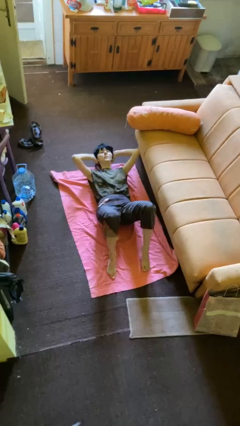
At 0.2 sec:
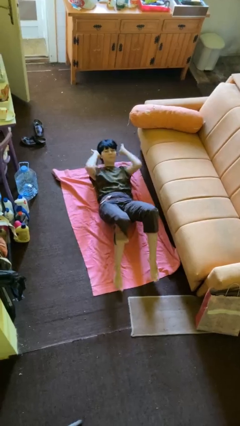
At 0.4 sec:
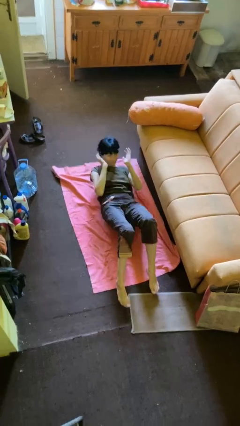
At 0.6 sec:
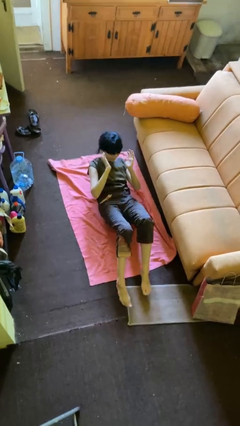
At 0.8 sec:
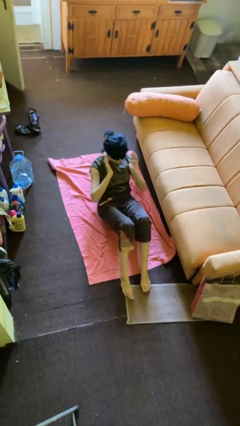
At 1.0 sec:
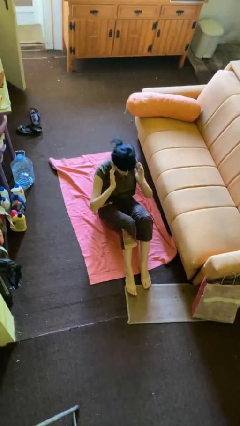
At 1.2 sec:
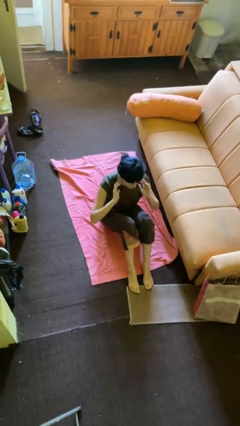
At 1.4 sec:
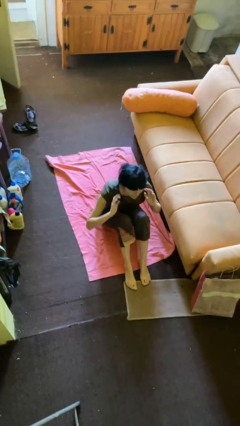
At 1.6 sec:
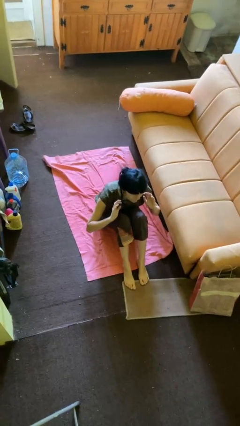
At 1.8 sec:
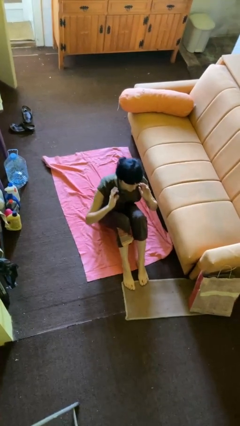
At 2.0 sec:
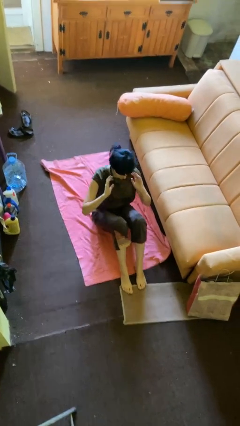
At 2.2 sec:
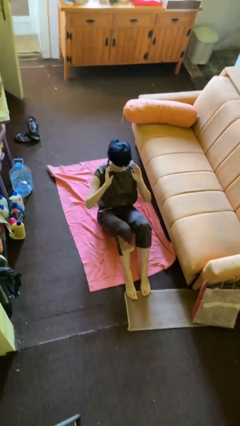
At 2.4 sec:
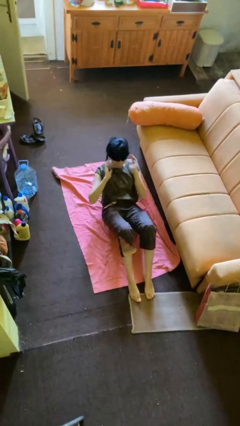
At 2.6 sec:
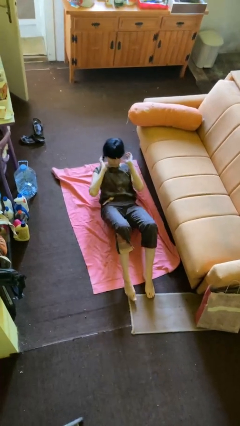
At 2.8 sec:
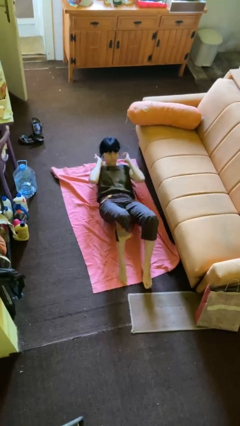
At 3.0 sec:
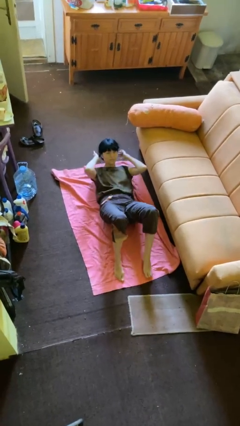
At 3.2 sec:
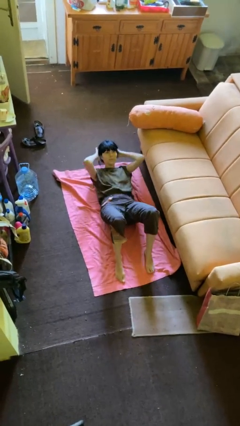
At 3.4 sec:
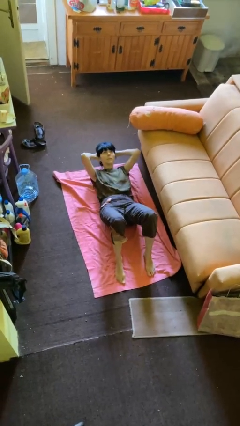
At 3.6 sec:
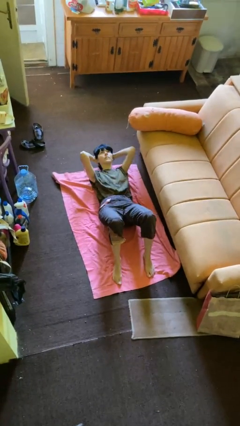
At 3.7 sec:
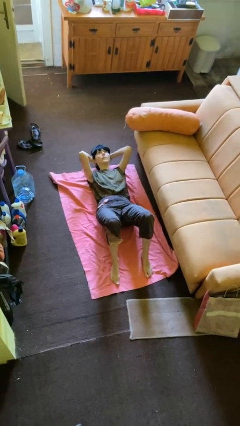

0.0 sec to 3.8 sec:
person exercises with situp

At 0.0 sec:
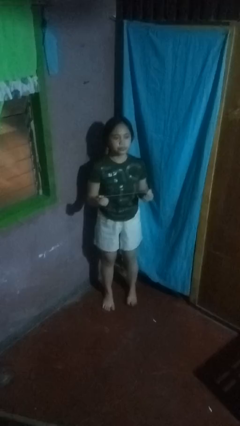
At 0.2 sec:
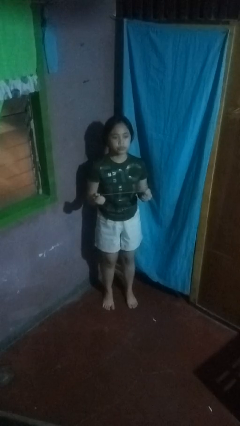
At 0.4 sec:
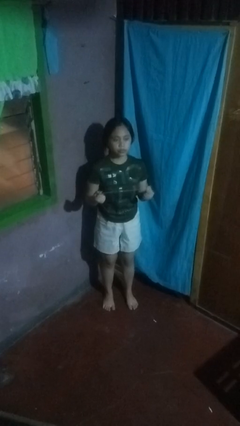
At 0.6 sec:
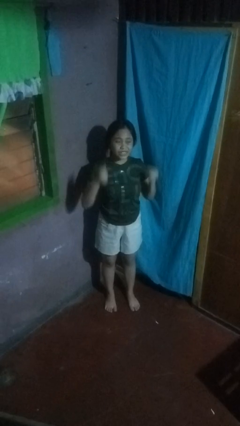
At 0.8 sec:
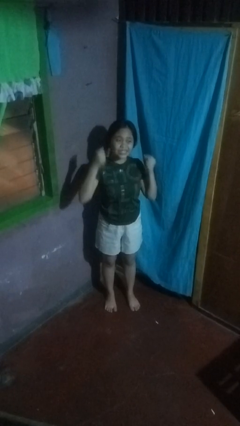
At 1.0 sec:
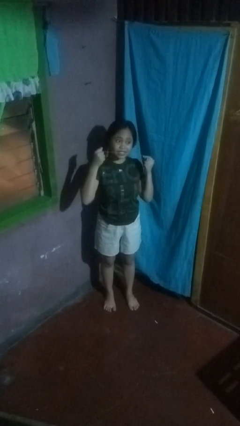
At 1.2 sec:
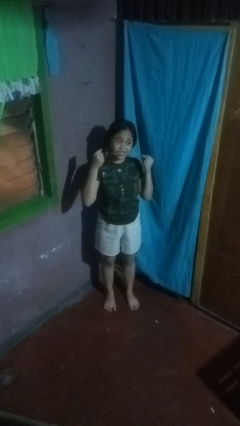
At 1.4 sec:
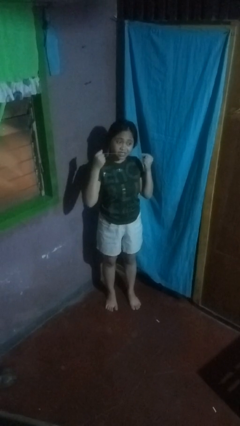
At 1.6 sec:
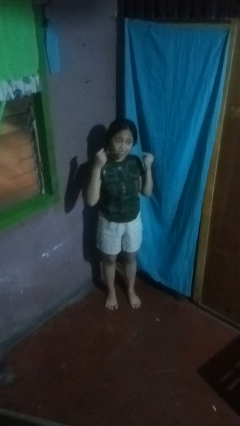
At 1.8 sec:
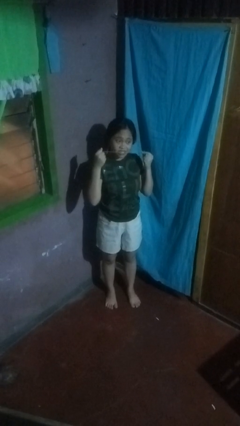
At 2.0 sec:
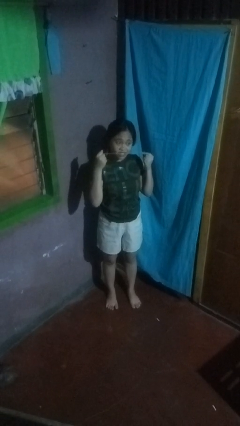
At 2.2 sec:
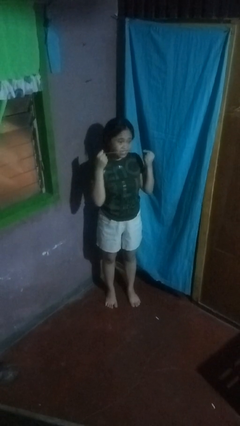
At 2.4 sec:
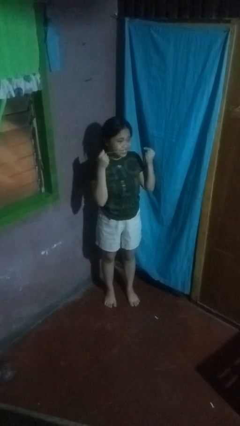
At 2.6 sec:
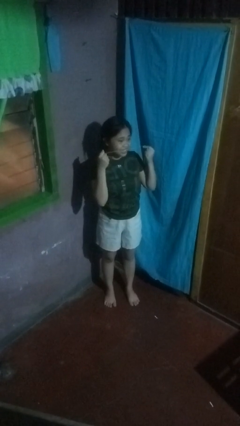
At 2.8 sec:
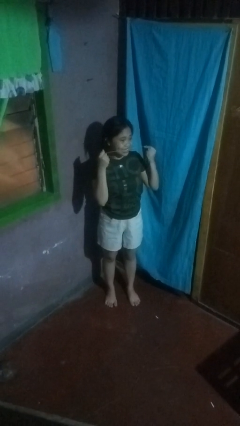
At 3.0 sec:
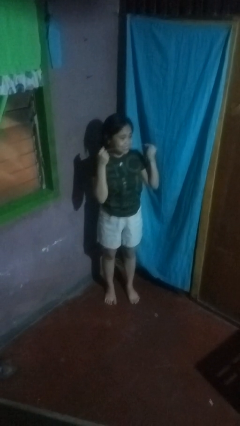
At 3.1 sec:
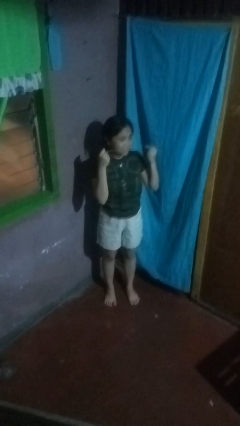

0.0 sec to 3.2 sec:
person flosses

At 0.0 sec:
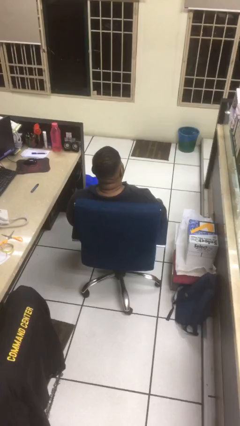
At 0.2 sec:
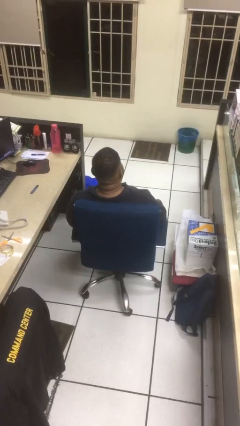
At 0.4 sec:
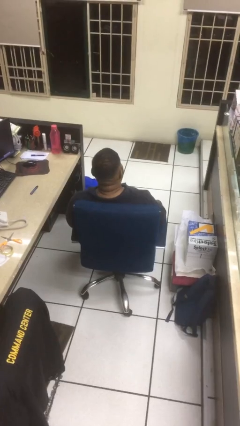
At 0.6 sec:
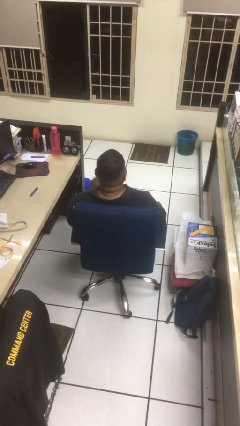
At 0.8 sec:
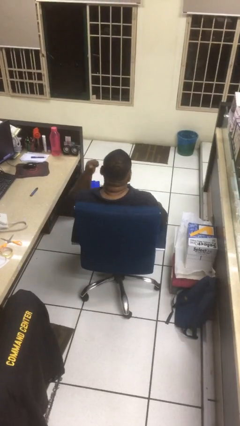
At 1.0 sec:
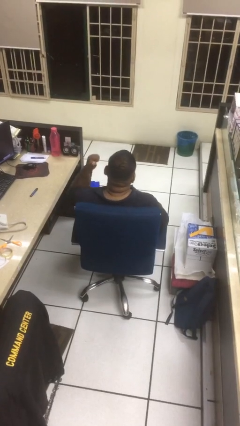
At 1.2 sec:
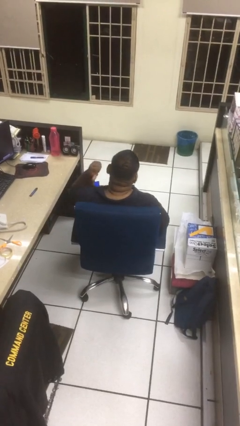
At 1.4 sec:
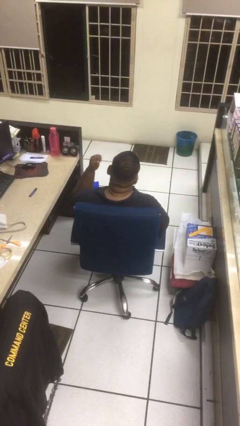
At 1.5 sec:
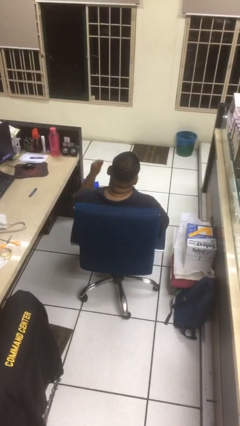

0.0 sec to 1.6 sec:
person gestures behind me

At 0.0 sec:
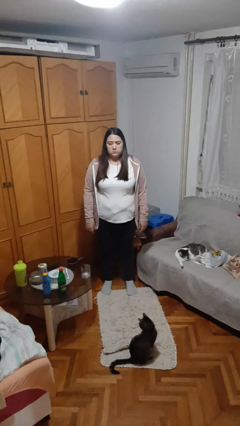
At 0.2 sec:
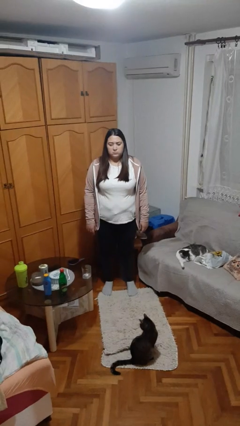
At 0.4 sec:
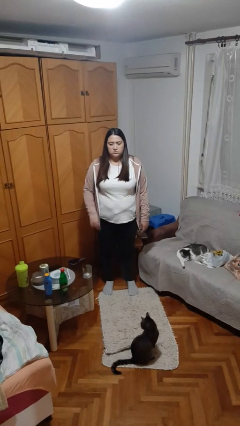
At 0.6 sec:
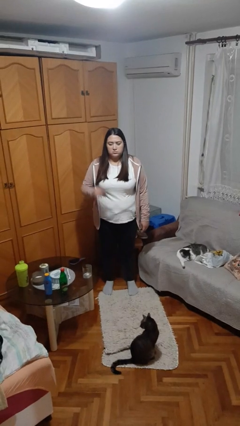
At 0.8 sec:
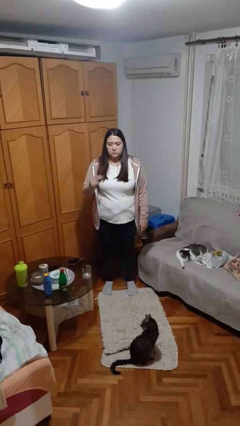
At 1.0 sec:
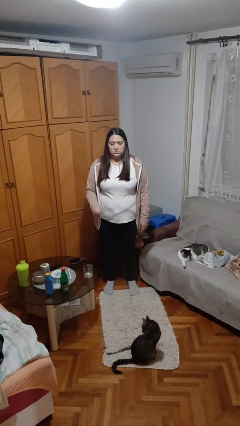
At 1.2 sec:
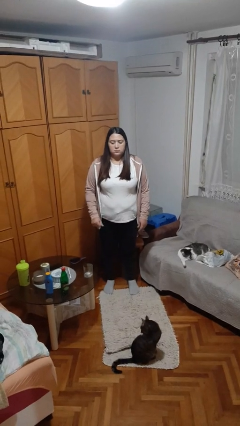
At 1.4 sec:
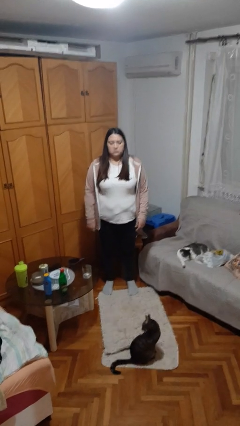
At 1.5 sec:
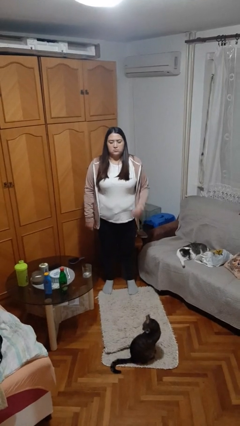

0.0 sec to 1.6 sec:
person snaps fingers

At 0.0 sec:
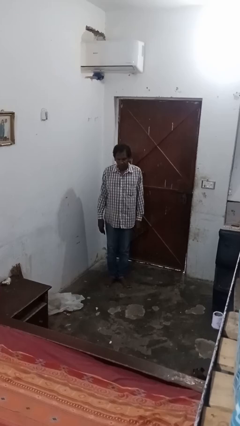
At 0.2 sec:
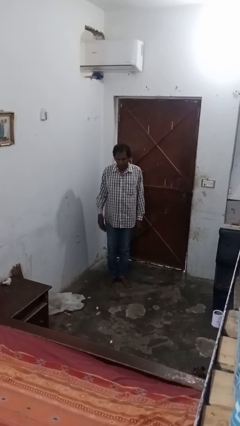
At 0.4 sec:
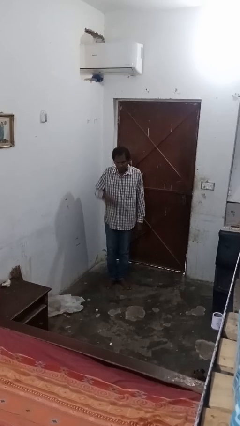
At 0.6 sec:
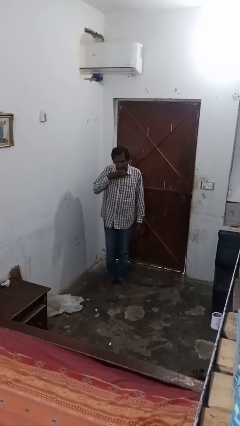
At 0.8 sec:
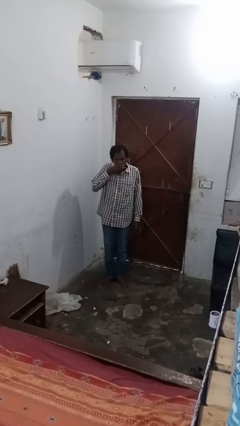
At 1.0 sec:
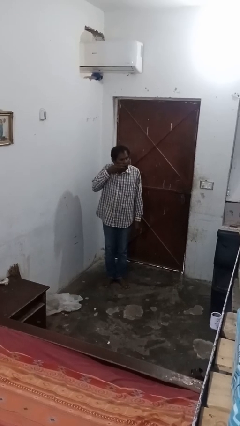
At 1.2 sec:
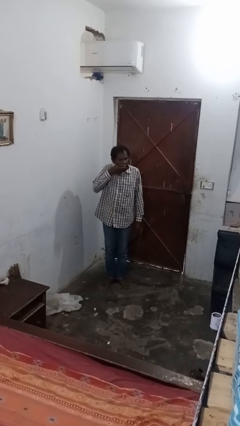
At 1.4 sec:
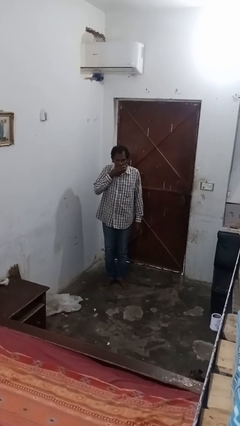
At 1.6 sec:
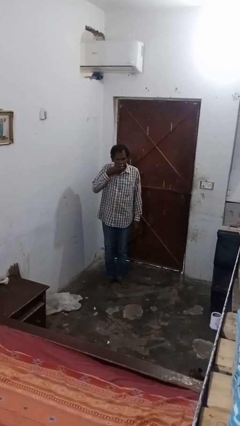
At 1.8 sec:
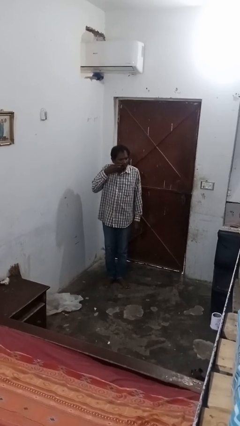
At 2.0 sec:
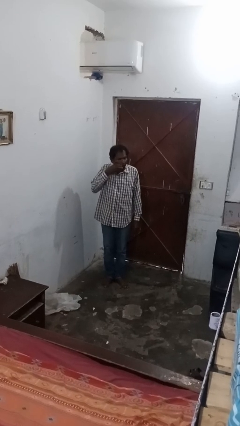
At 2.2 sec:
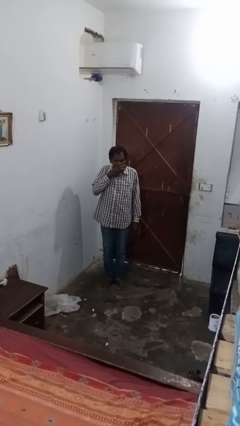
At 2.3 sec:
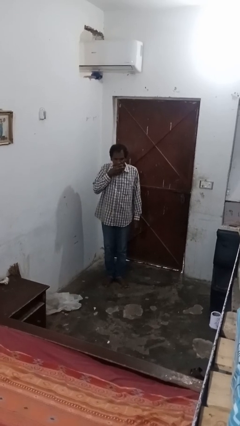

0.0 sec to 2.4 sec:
person wipes mouth with napkin

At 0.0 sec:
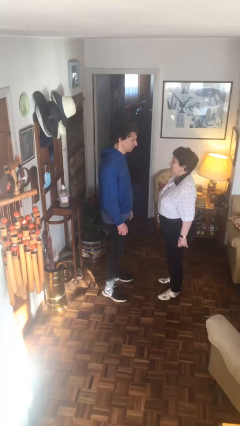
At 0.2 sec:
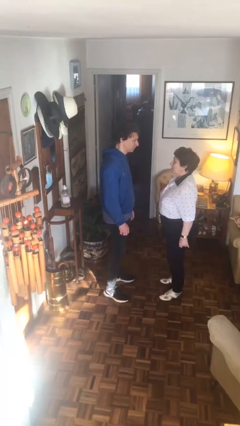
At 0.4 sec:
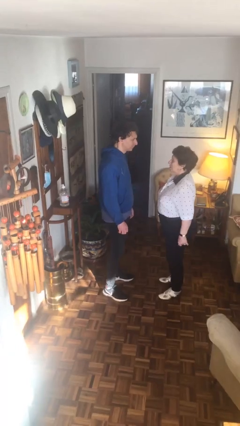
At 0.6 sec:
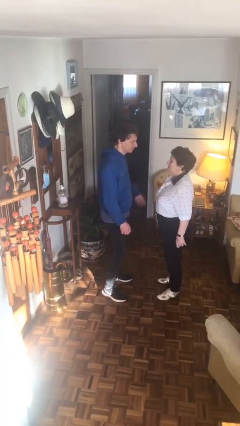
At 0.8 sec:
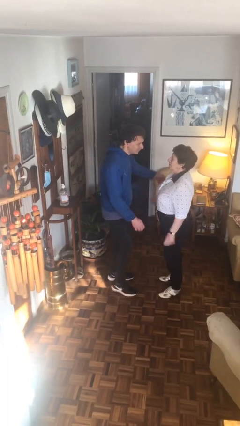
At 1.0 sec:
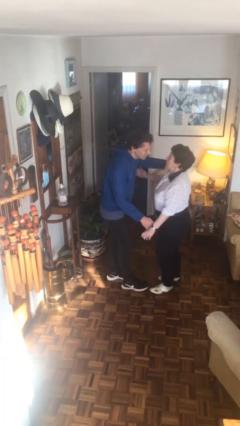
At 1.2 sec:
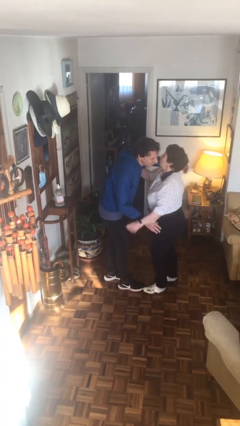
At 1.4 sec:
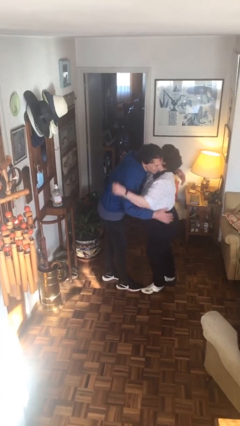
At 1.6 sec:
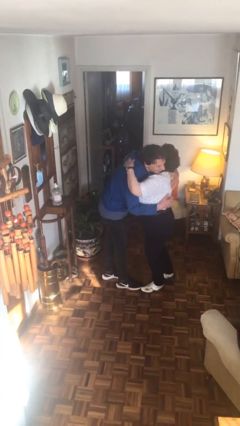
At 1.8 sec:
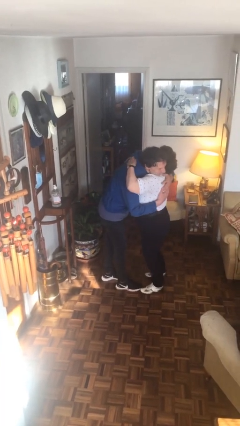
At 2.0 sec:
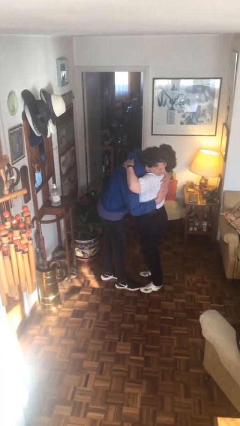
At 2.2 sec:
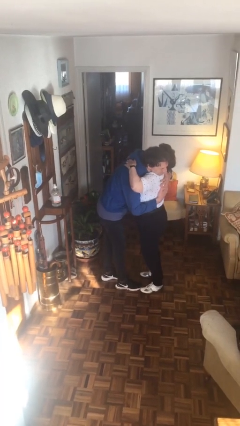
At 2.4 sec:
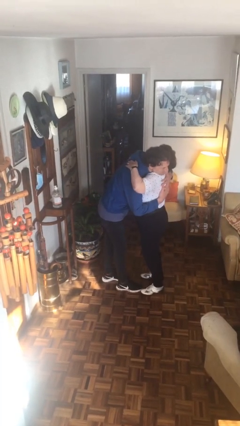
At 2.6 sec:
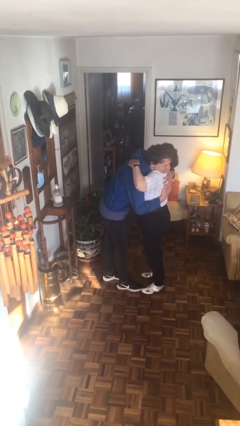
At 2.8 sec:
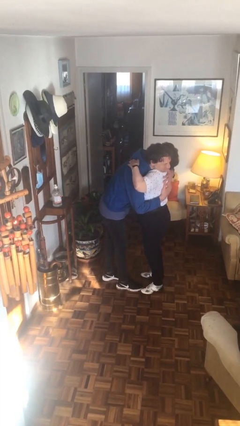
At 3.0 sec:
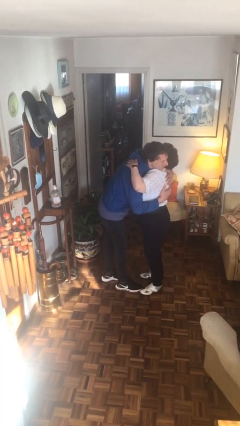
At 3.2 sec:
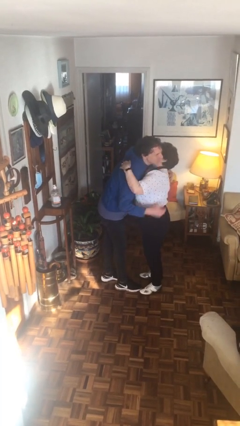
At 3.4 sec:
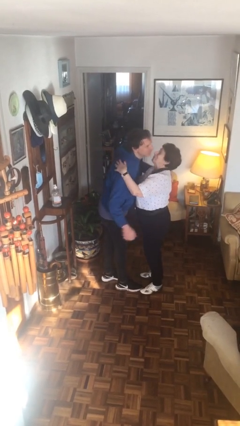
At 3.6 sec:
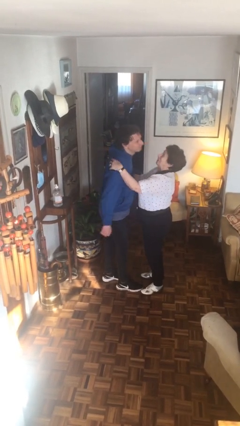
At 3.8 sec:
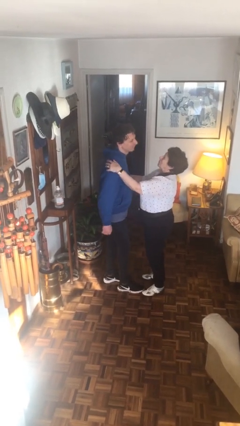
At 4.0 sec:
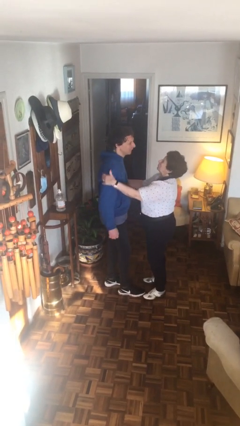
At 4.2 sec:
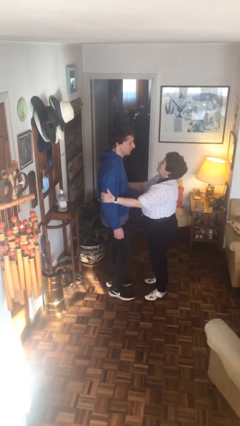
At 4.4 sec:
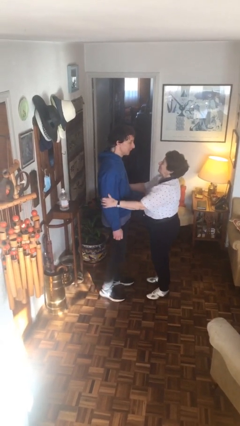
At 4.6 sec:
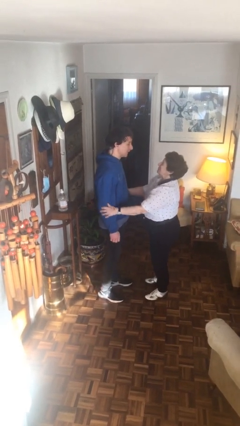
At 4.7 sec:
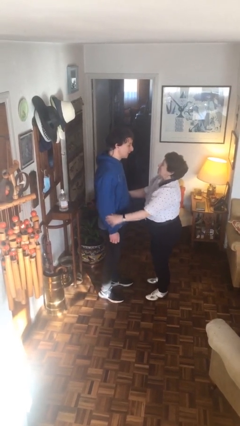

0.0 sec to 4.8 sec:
person embraces person
